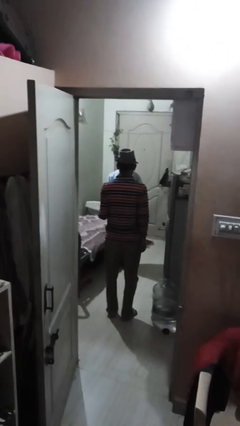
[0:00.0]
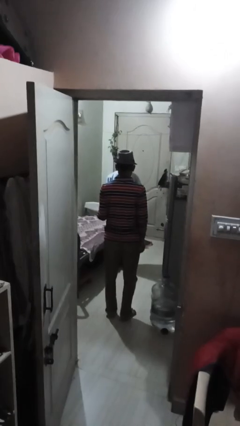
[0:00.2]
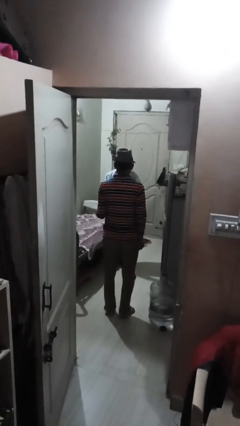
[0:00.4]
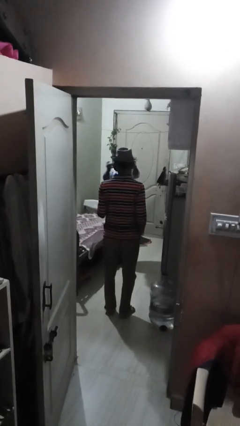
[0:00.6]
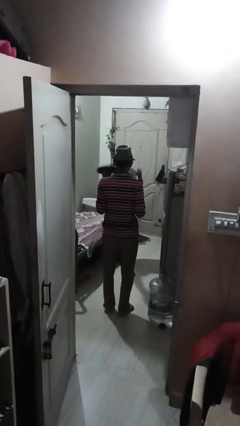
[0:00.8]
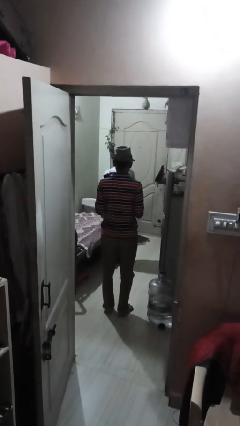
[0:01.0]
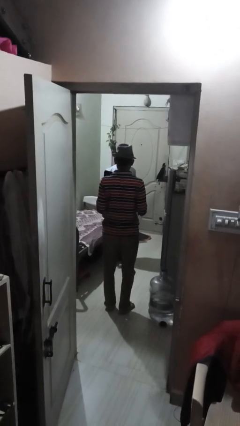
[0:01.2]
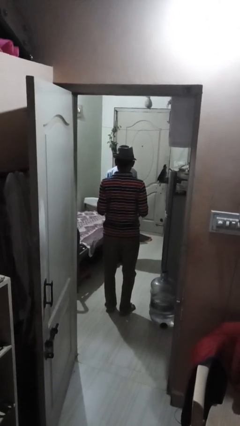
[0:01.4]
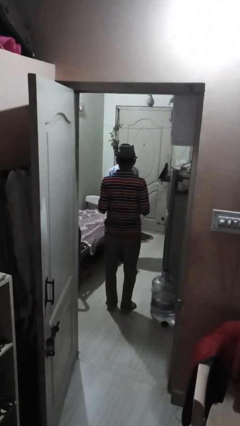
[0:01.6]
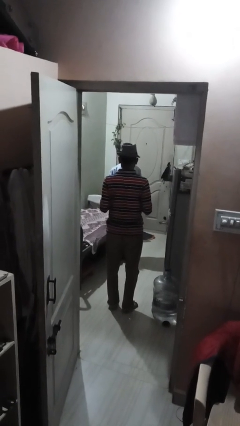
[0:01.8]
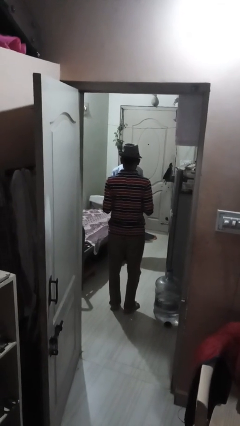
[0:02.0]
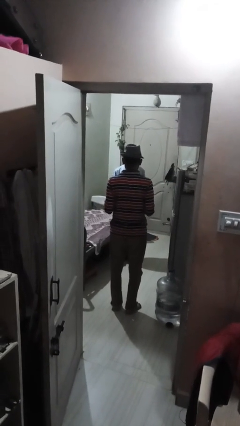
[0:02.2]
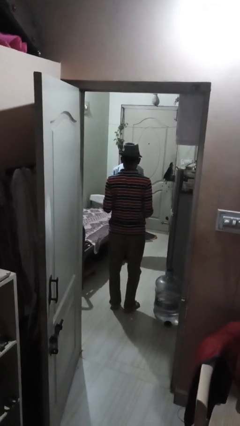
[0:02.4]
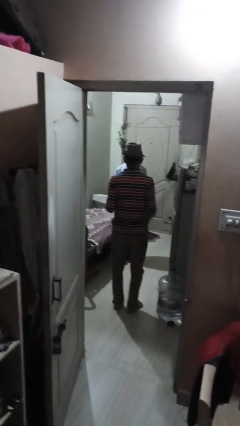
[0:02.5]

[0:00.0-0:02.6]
person catches object from person

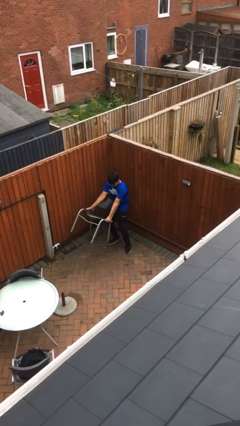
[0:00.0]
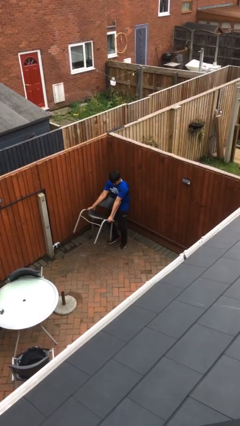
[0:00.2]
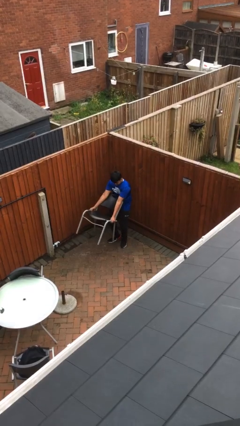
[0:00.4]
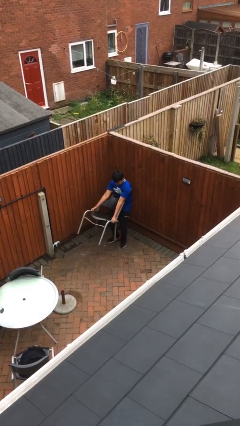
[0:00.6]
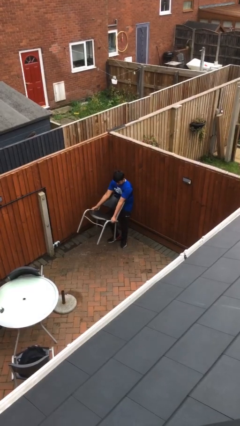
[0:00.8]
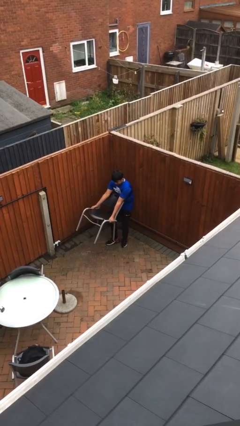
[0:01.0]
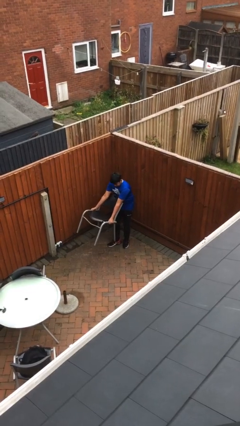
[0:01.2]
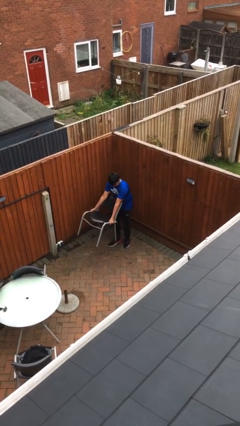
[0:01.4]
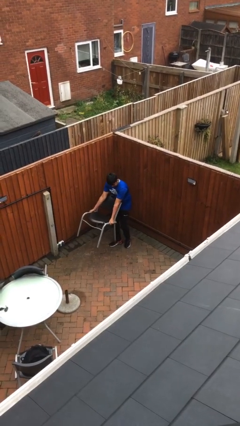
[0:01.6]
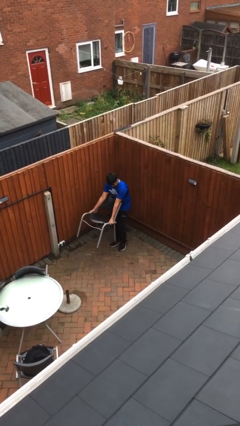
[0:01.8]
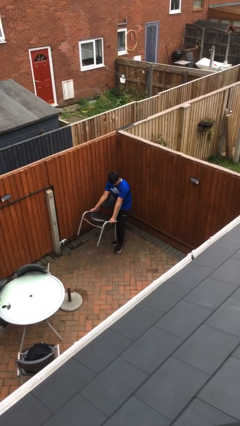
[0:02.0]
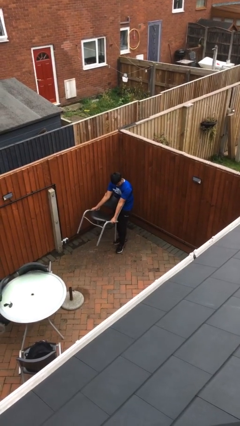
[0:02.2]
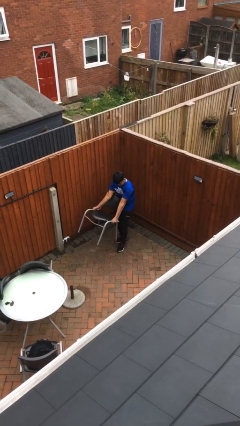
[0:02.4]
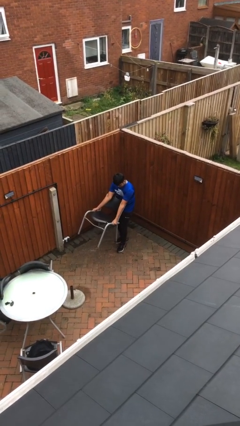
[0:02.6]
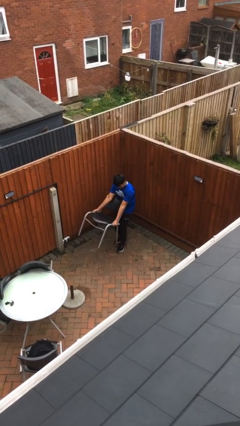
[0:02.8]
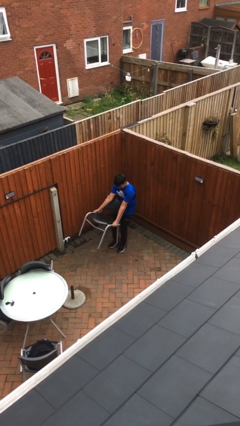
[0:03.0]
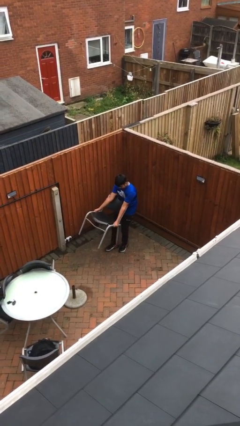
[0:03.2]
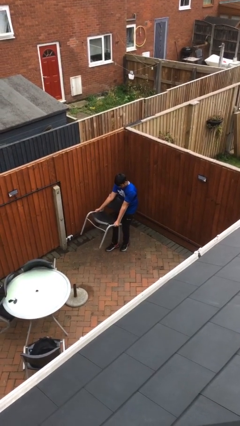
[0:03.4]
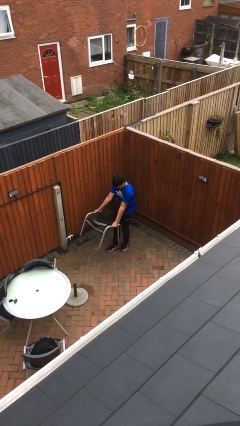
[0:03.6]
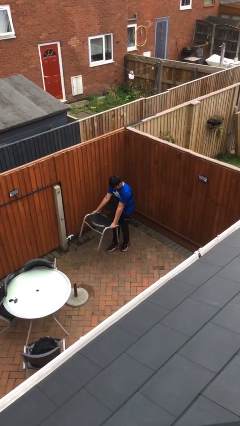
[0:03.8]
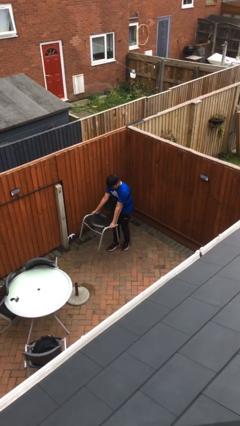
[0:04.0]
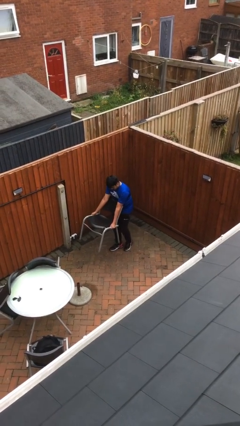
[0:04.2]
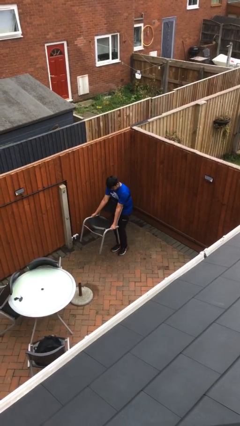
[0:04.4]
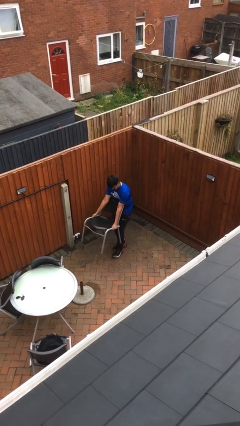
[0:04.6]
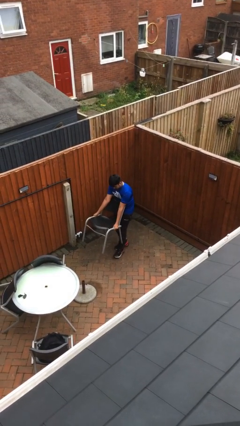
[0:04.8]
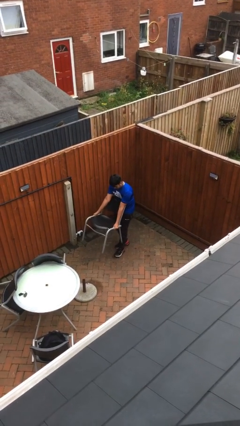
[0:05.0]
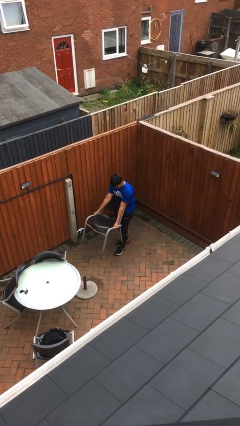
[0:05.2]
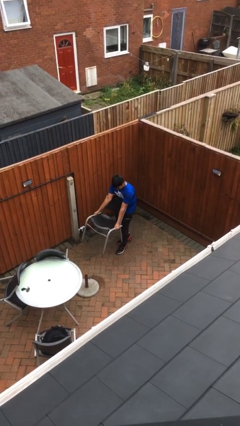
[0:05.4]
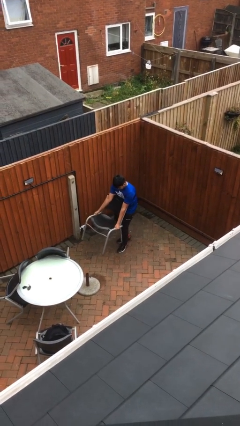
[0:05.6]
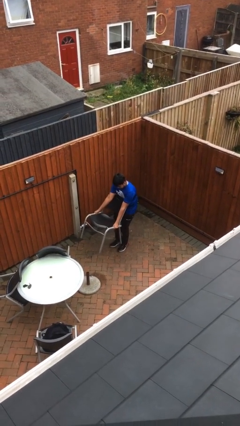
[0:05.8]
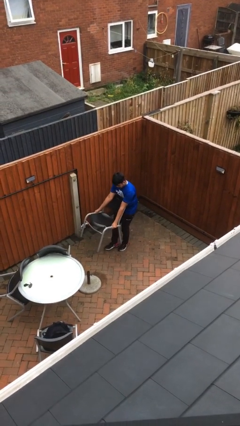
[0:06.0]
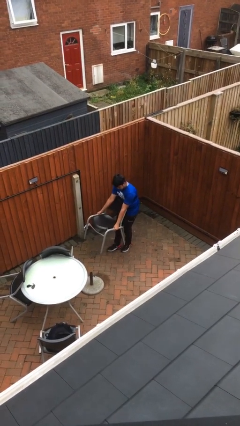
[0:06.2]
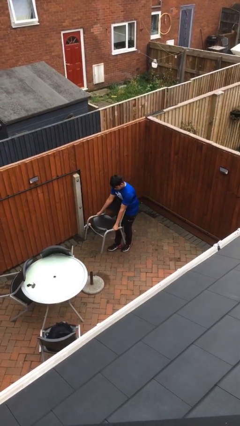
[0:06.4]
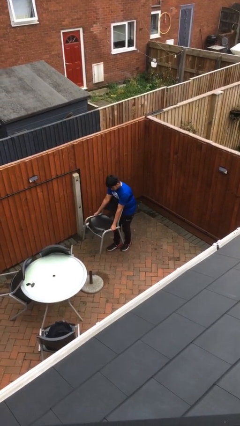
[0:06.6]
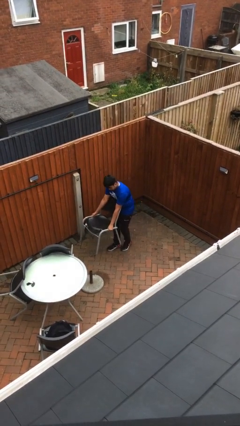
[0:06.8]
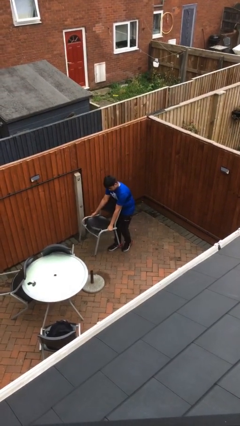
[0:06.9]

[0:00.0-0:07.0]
person carries heavy object

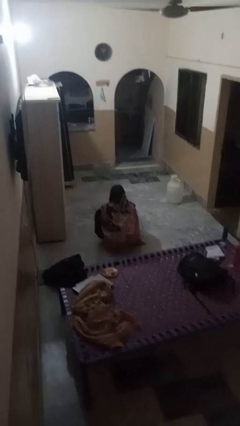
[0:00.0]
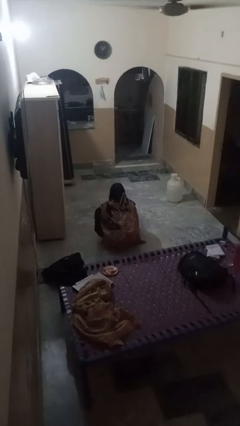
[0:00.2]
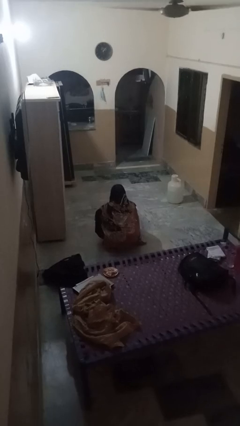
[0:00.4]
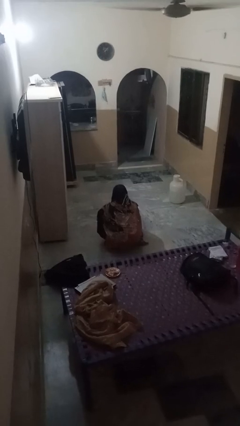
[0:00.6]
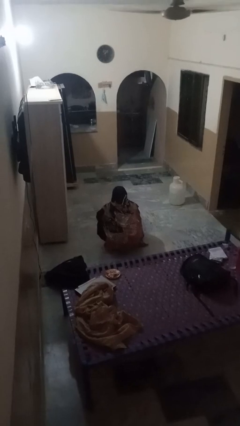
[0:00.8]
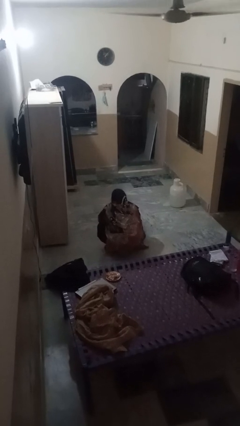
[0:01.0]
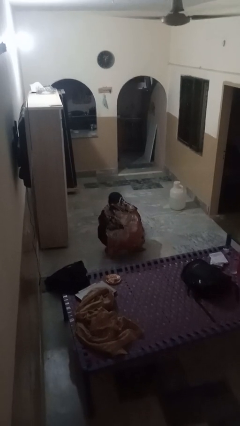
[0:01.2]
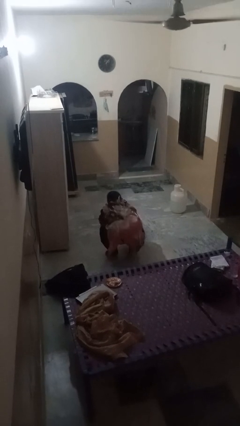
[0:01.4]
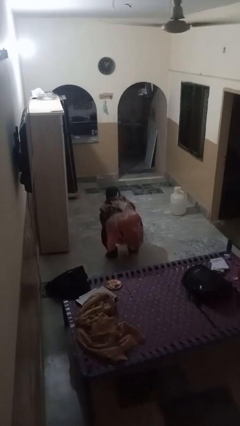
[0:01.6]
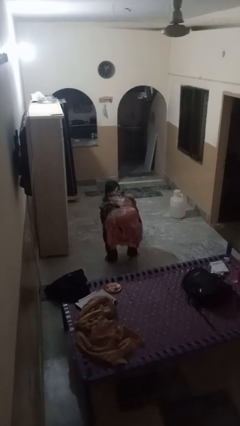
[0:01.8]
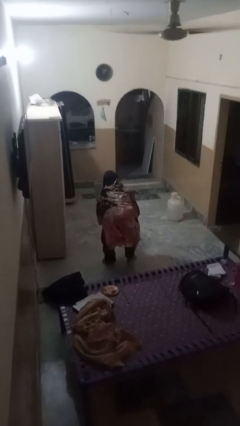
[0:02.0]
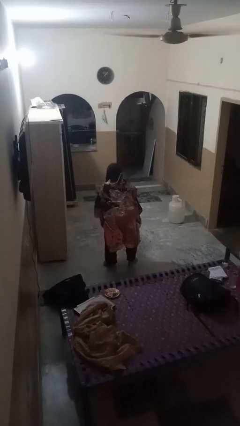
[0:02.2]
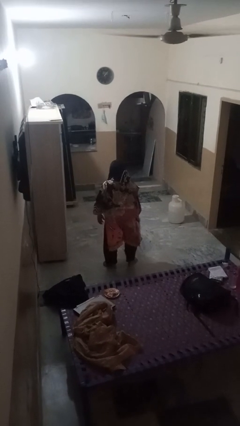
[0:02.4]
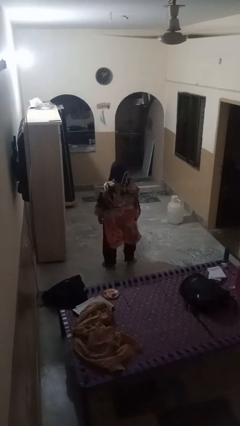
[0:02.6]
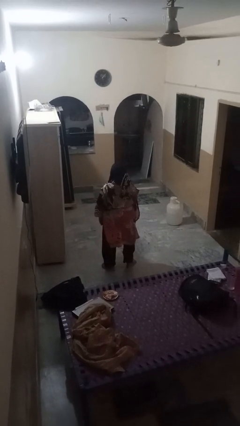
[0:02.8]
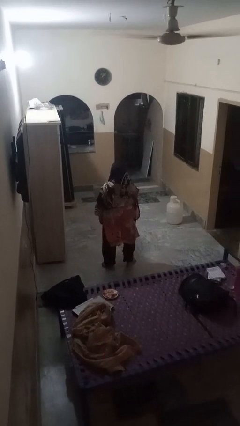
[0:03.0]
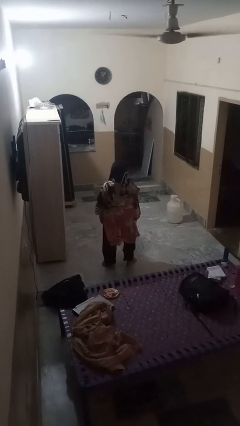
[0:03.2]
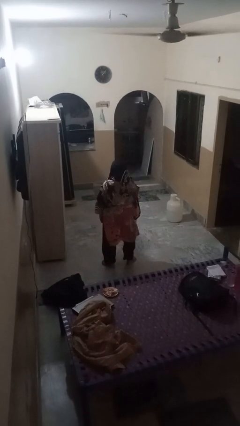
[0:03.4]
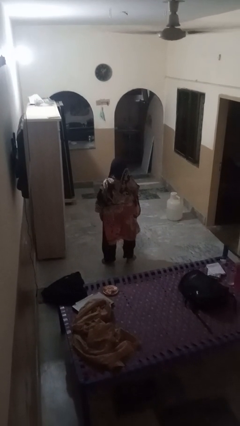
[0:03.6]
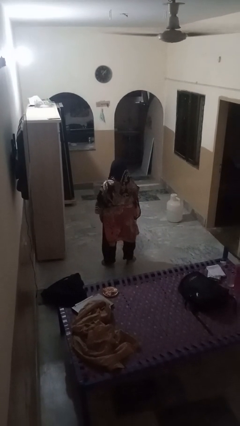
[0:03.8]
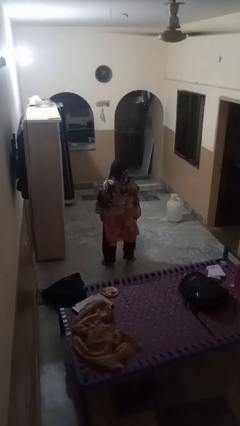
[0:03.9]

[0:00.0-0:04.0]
person stands up

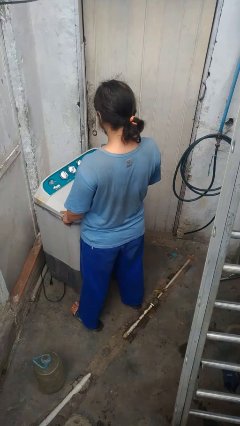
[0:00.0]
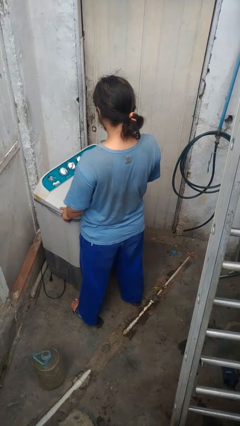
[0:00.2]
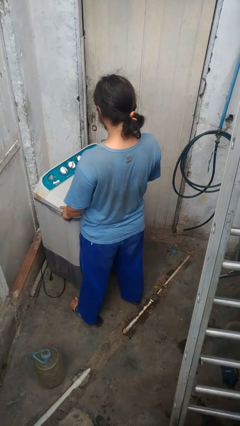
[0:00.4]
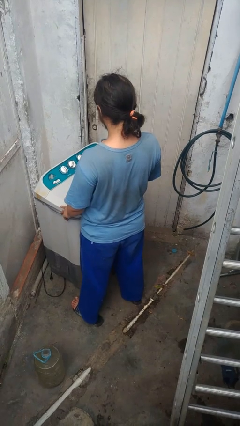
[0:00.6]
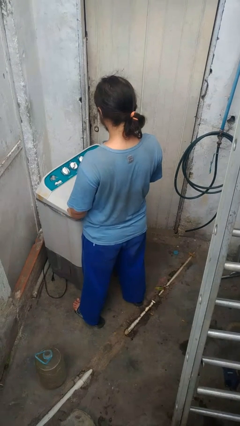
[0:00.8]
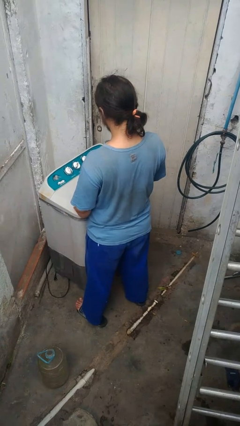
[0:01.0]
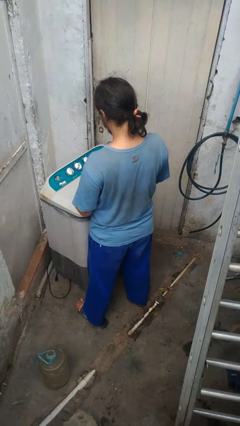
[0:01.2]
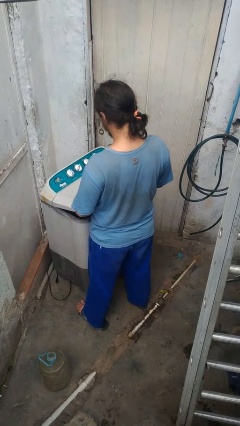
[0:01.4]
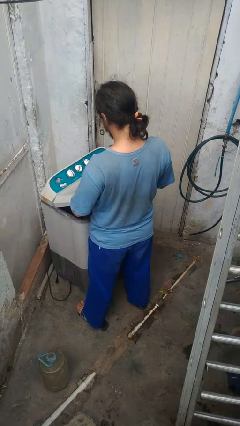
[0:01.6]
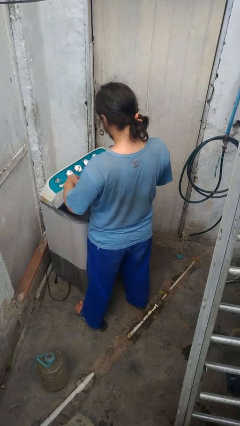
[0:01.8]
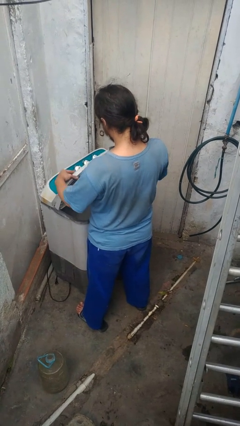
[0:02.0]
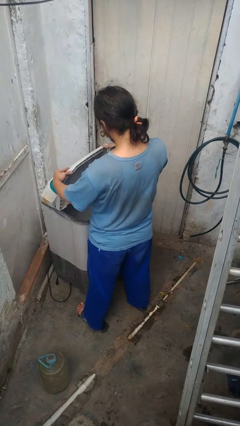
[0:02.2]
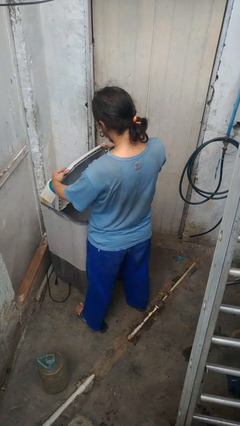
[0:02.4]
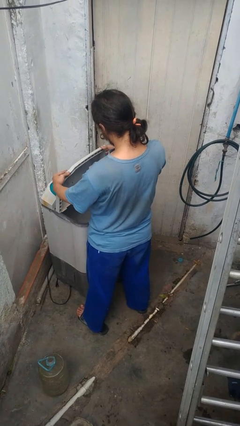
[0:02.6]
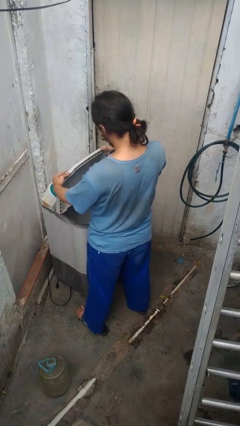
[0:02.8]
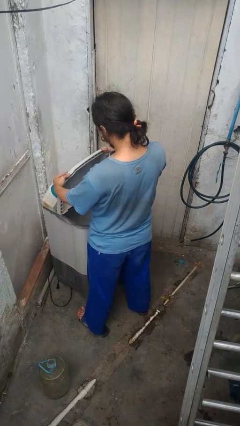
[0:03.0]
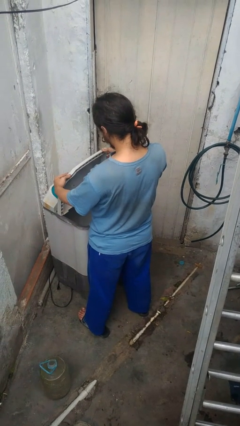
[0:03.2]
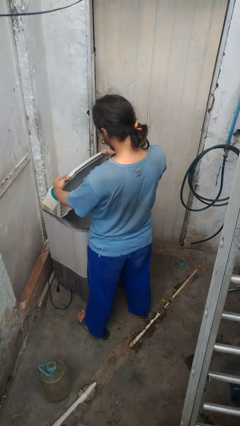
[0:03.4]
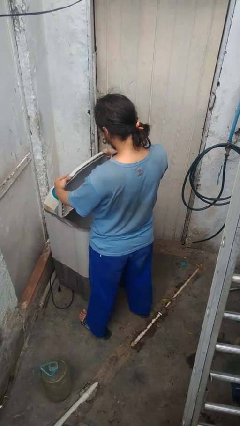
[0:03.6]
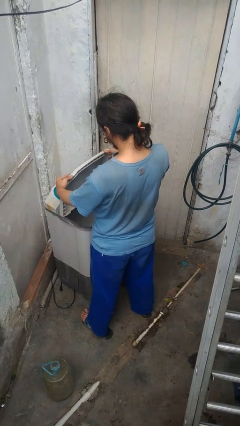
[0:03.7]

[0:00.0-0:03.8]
person opens clothes washer

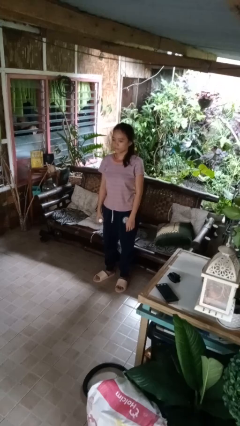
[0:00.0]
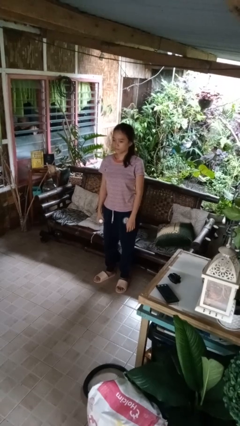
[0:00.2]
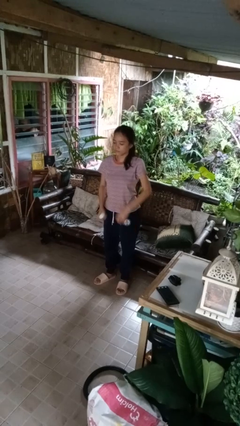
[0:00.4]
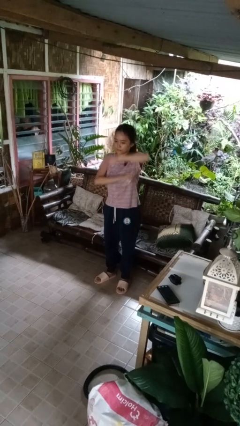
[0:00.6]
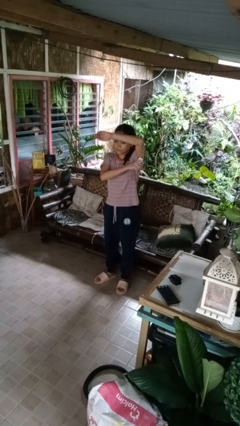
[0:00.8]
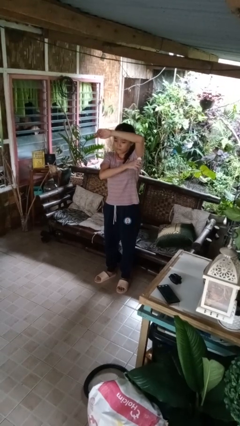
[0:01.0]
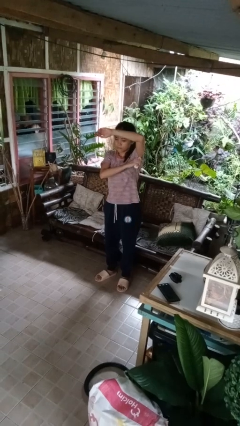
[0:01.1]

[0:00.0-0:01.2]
person applies deodorant
